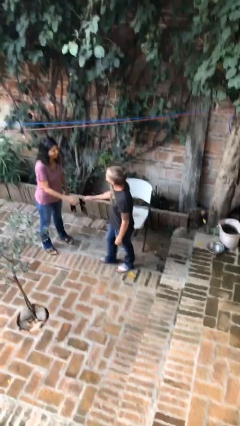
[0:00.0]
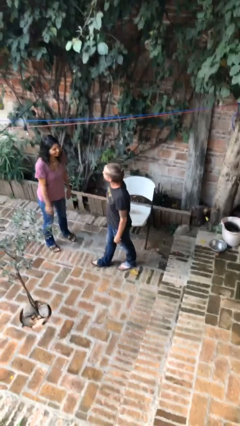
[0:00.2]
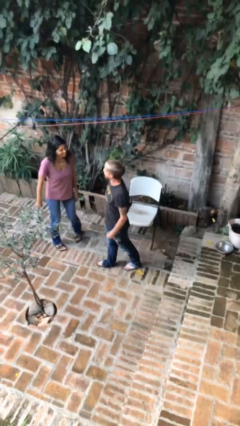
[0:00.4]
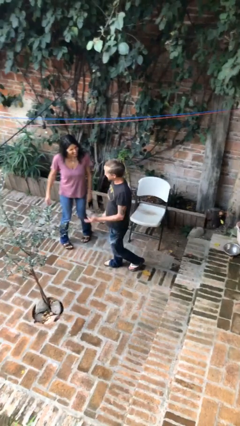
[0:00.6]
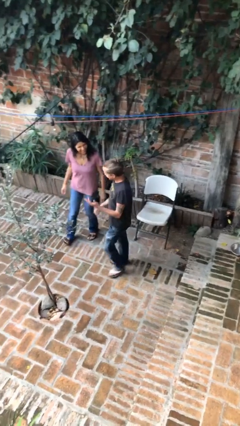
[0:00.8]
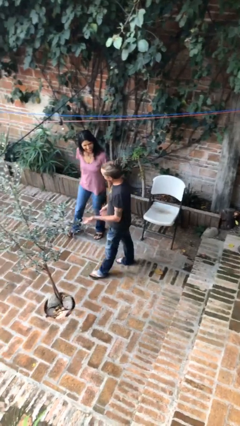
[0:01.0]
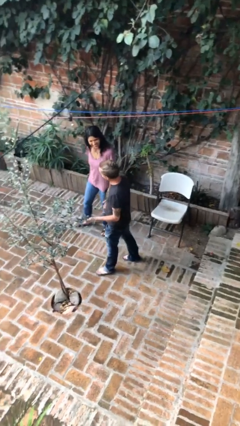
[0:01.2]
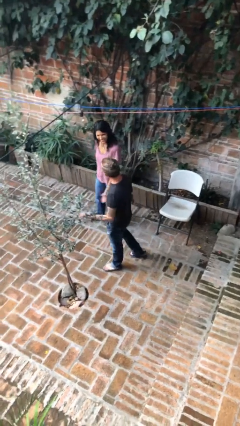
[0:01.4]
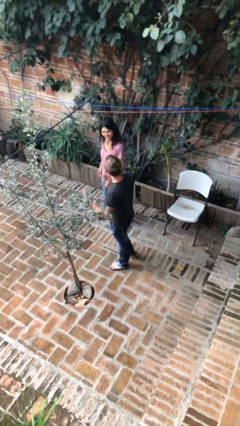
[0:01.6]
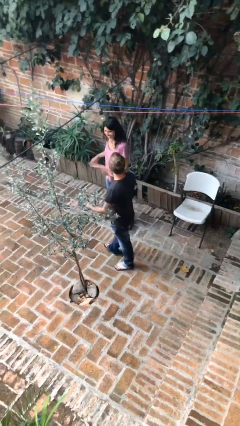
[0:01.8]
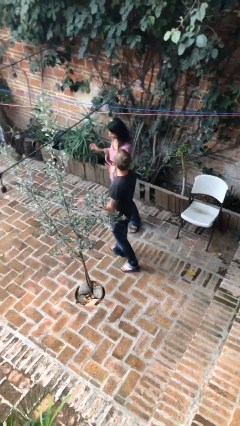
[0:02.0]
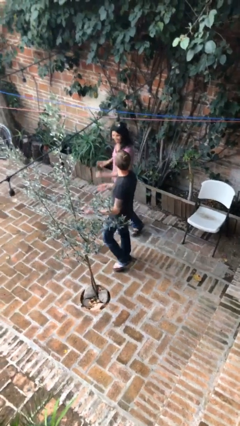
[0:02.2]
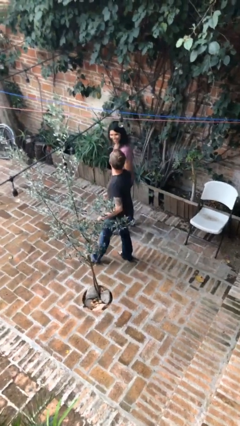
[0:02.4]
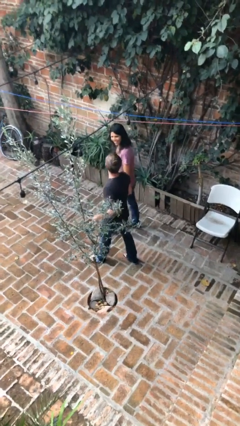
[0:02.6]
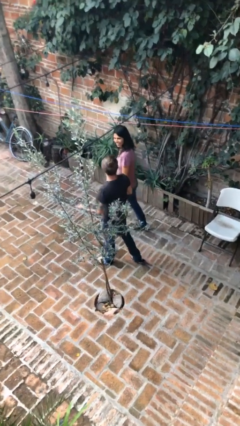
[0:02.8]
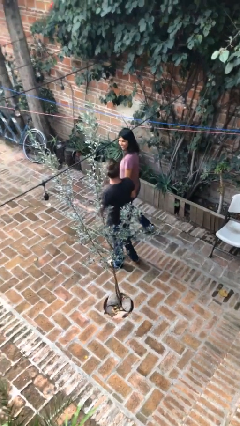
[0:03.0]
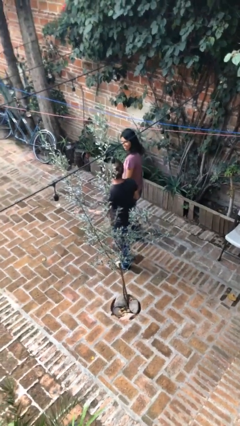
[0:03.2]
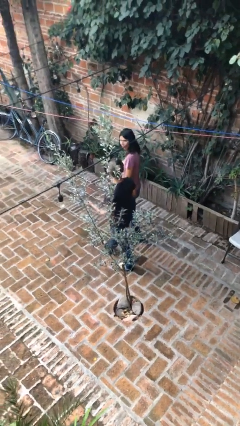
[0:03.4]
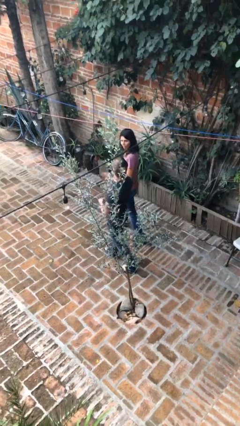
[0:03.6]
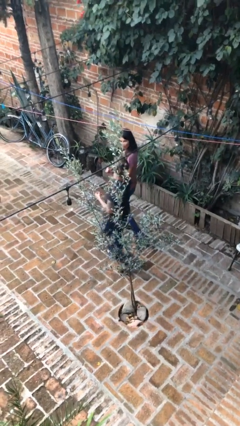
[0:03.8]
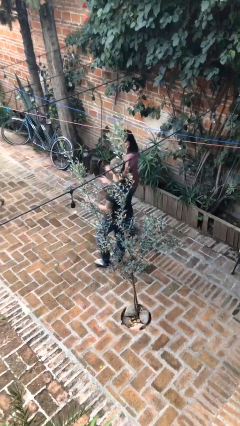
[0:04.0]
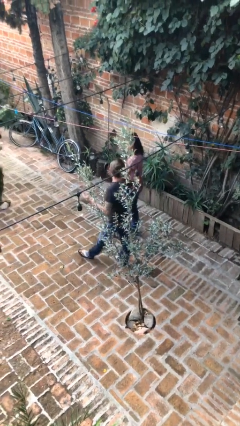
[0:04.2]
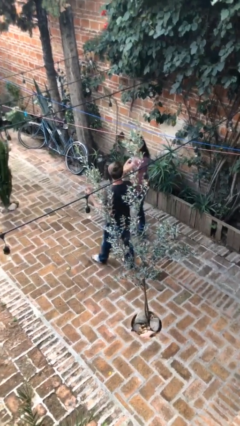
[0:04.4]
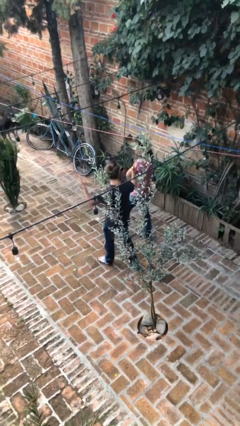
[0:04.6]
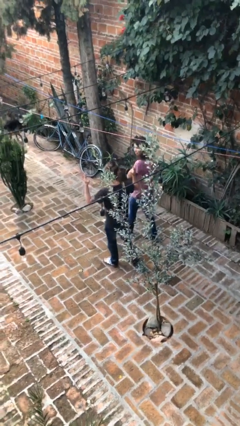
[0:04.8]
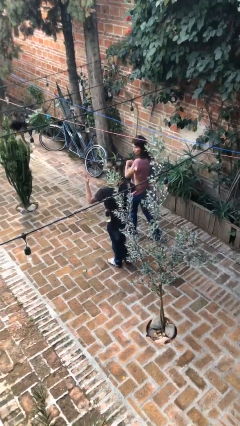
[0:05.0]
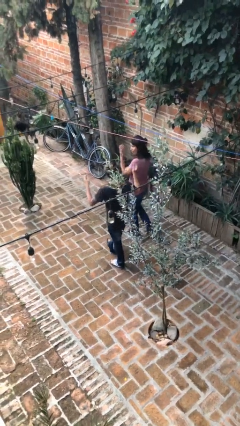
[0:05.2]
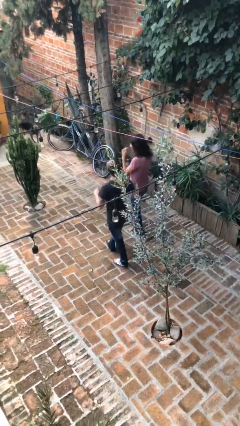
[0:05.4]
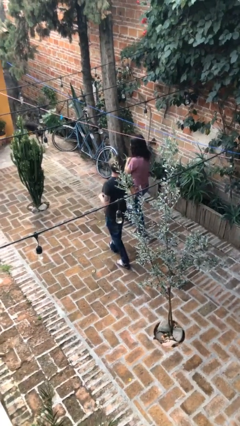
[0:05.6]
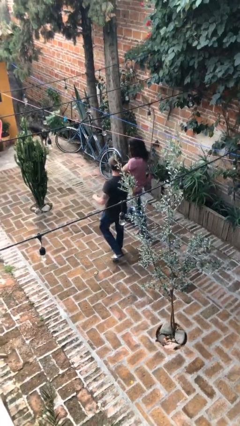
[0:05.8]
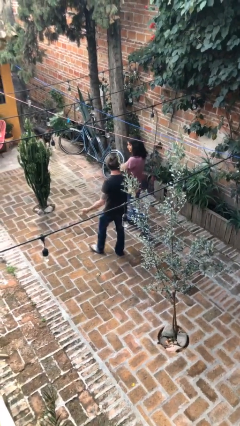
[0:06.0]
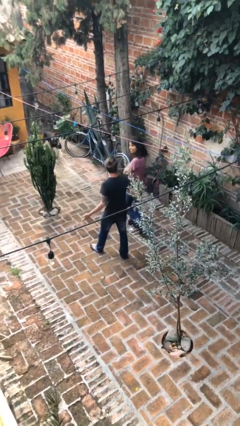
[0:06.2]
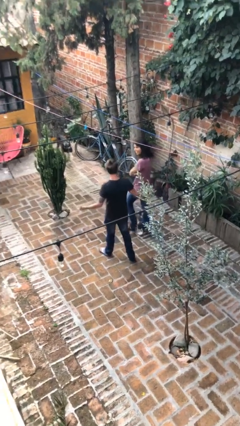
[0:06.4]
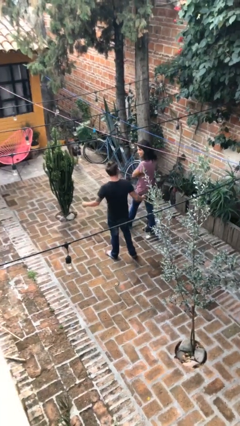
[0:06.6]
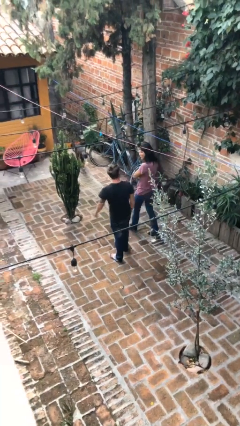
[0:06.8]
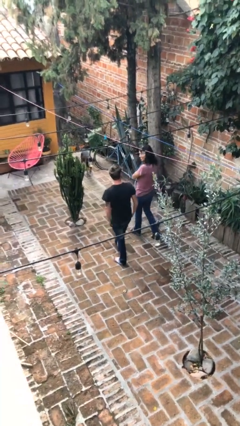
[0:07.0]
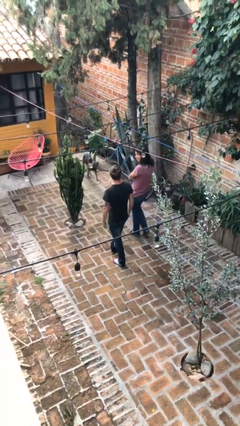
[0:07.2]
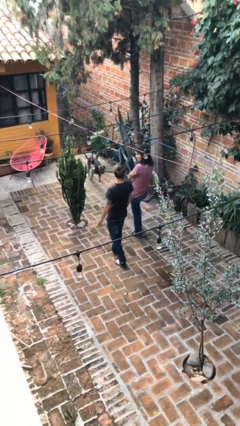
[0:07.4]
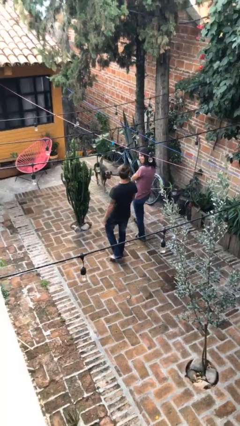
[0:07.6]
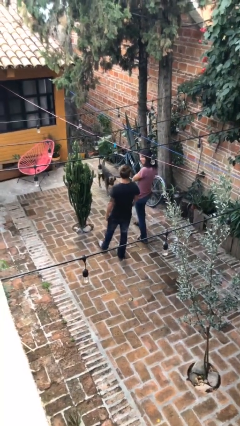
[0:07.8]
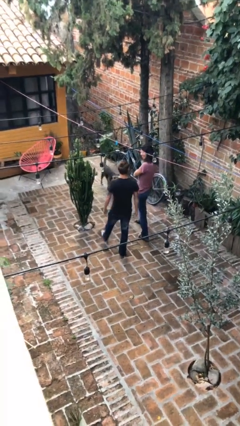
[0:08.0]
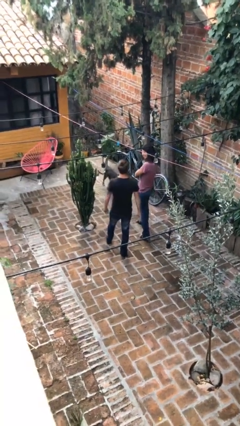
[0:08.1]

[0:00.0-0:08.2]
person talks to person

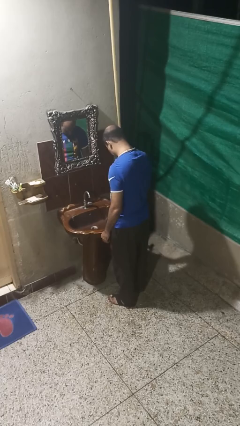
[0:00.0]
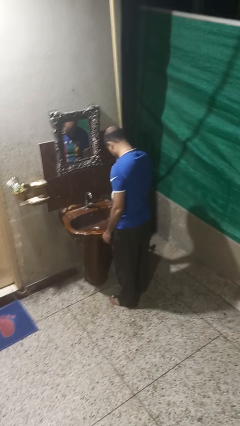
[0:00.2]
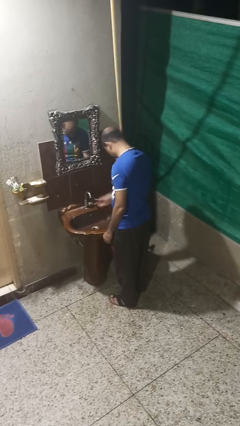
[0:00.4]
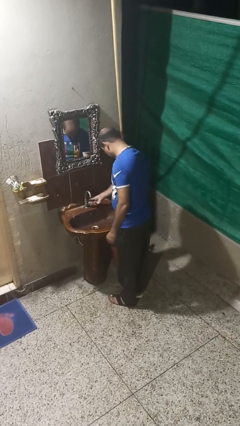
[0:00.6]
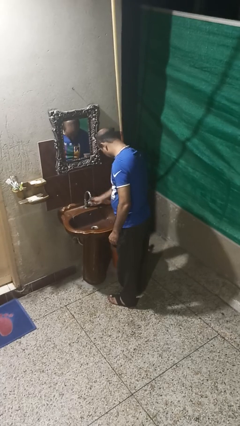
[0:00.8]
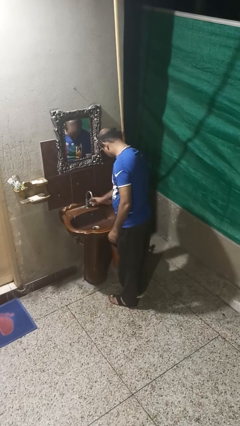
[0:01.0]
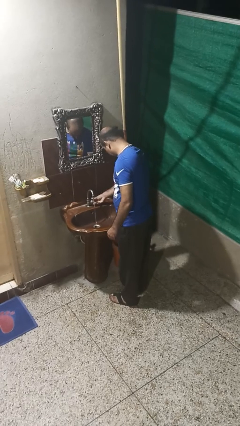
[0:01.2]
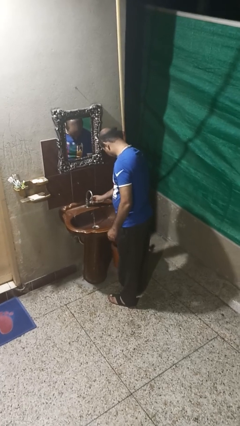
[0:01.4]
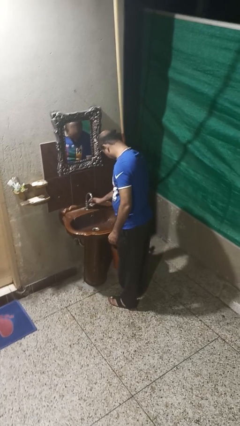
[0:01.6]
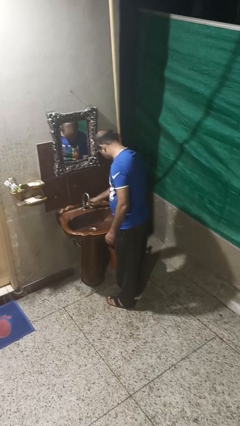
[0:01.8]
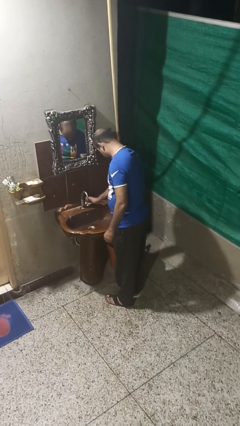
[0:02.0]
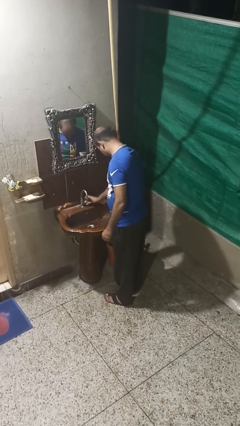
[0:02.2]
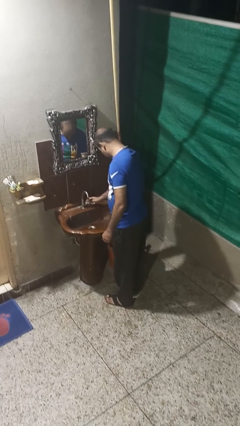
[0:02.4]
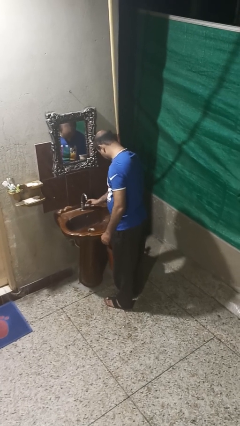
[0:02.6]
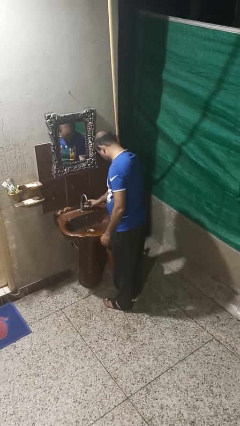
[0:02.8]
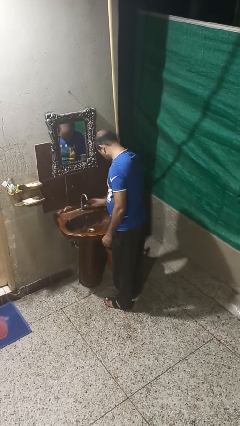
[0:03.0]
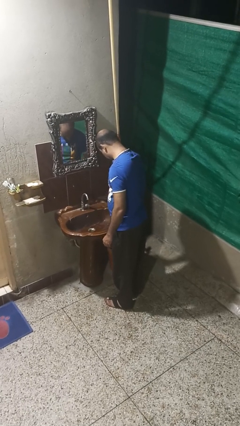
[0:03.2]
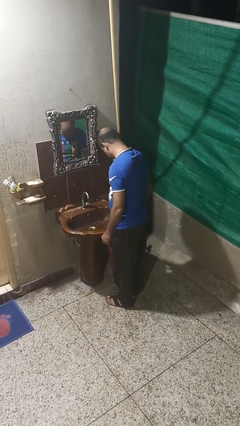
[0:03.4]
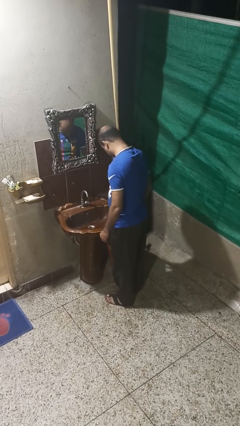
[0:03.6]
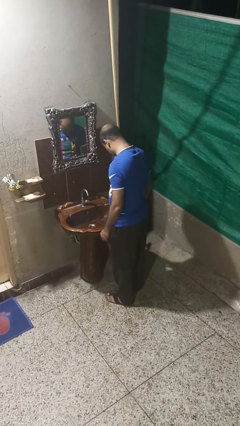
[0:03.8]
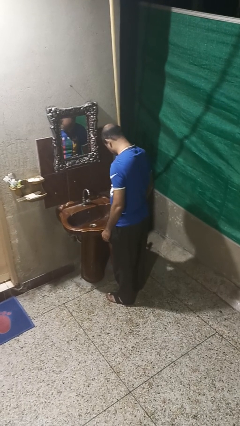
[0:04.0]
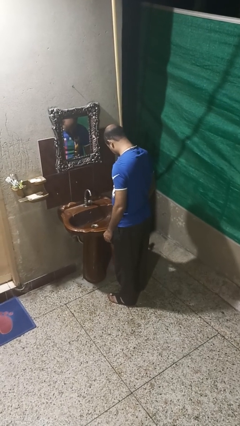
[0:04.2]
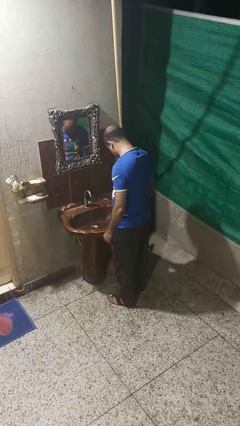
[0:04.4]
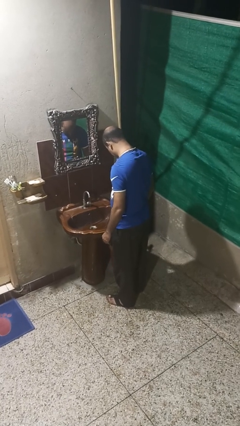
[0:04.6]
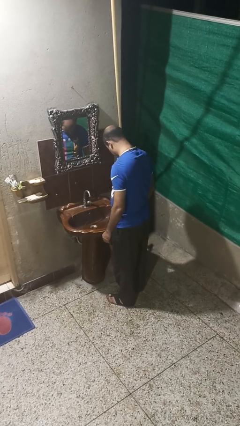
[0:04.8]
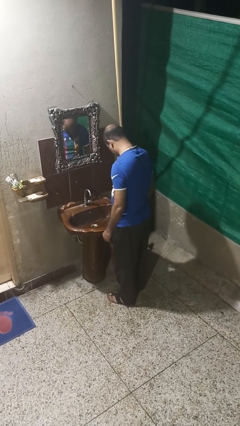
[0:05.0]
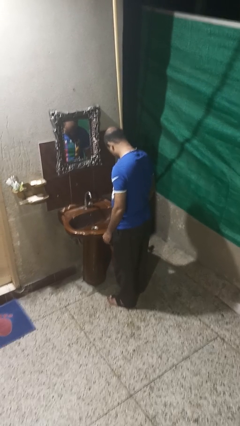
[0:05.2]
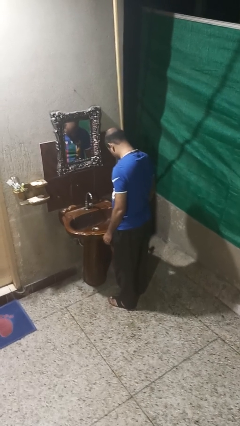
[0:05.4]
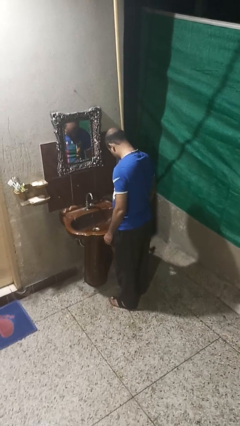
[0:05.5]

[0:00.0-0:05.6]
person turns on faucet

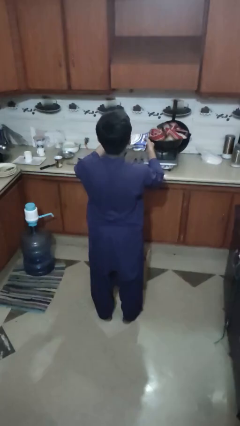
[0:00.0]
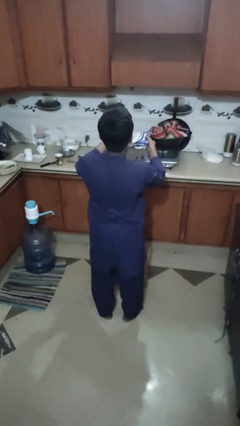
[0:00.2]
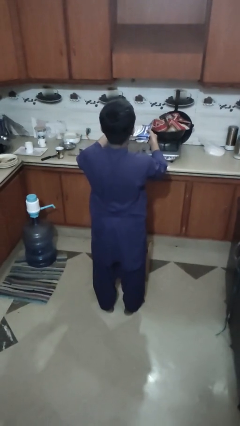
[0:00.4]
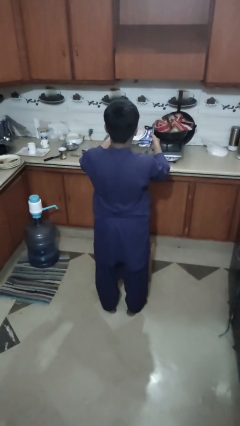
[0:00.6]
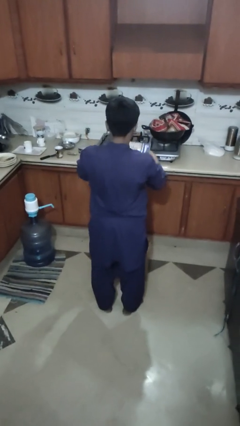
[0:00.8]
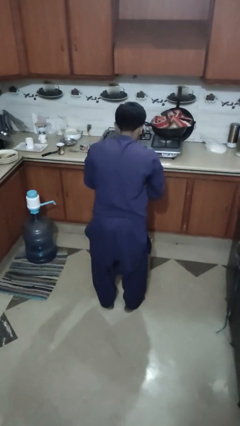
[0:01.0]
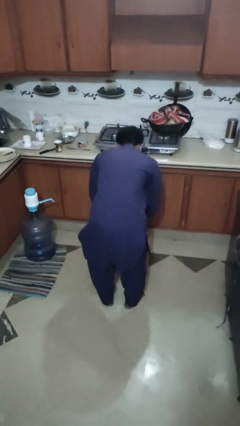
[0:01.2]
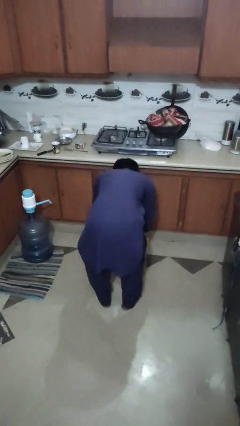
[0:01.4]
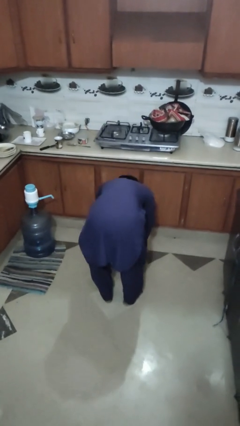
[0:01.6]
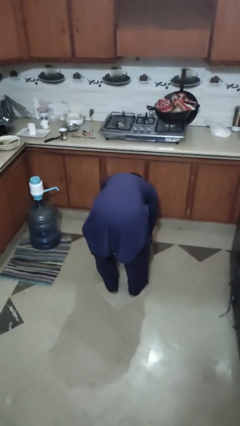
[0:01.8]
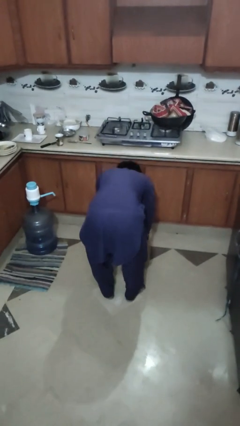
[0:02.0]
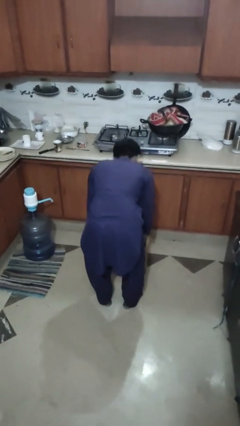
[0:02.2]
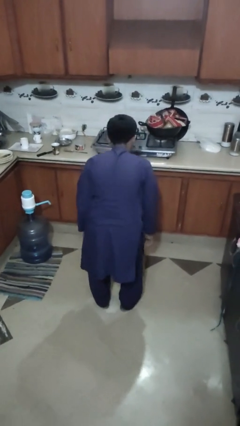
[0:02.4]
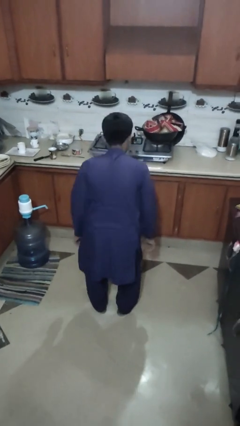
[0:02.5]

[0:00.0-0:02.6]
person puts object into box

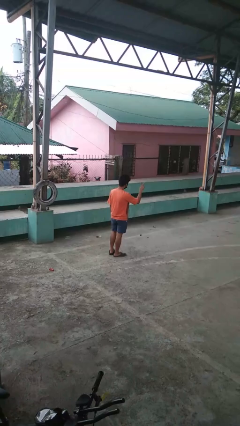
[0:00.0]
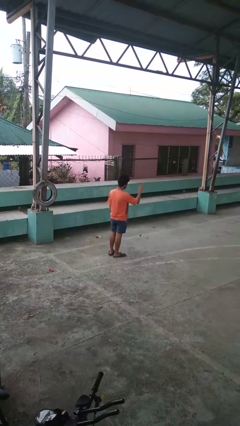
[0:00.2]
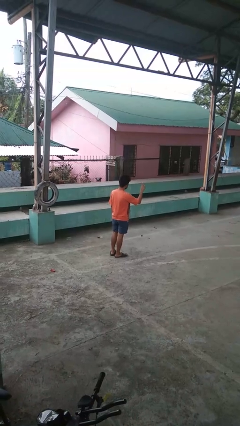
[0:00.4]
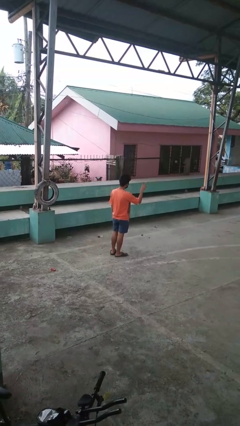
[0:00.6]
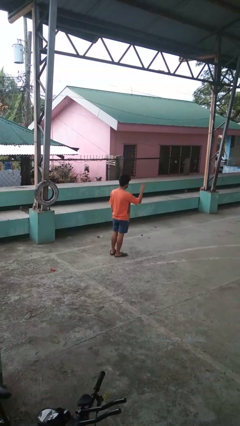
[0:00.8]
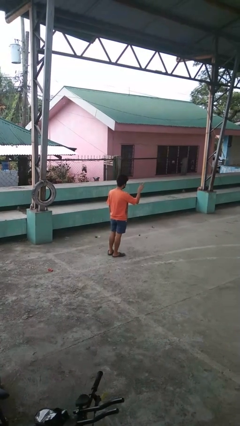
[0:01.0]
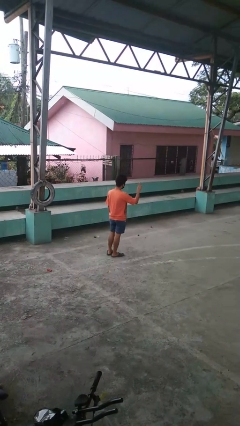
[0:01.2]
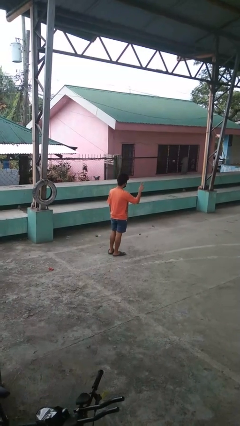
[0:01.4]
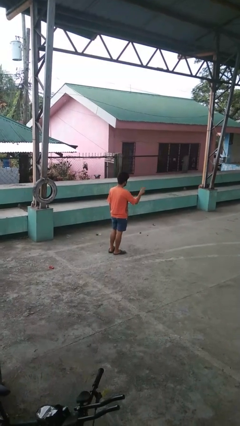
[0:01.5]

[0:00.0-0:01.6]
person gestures peace
